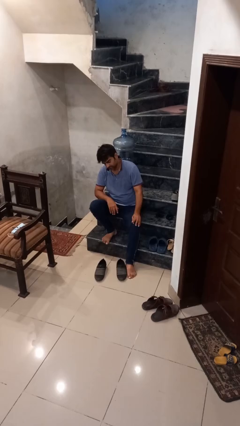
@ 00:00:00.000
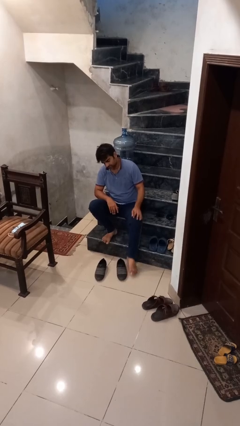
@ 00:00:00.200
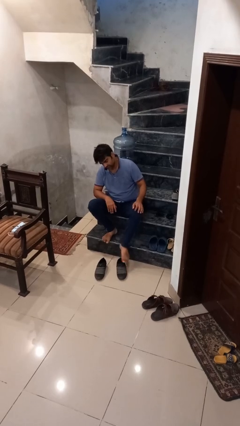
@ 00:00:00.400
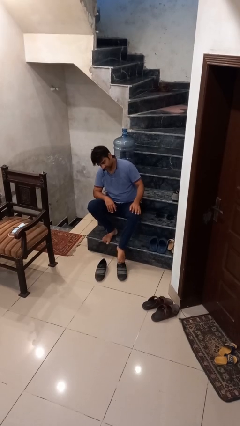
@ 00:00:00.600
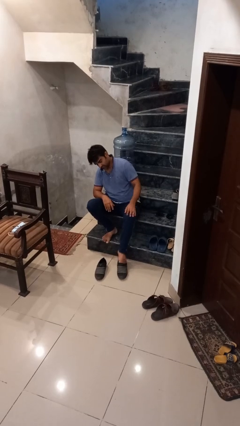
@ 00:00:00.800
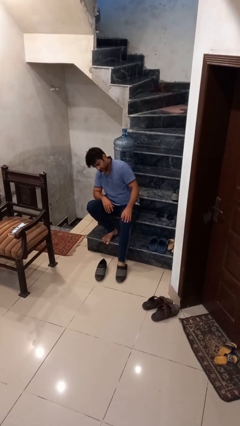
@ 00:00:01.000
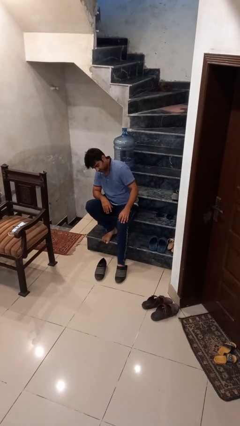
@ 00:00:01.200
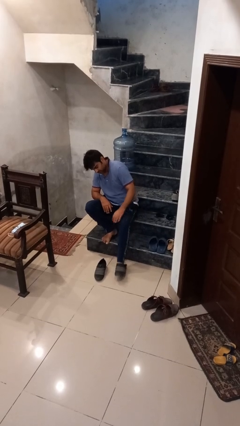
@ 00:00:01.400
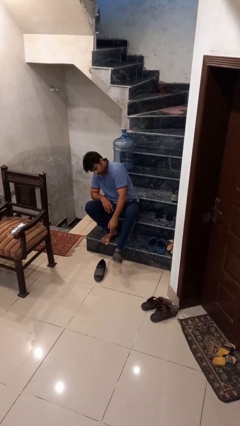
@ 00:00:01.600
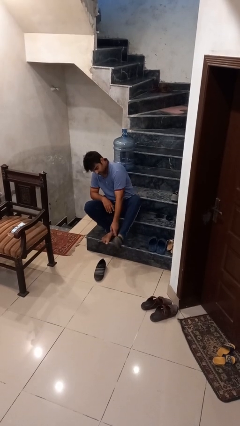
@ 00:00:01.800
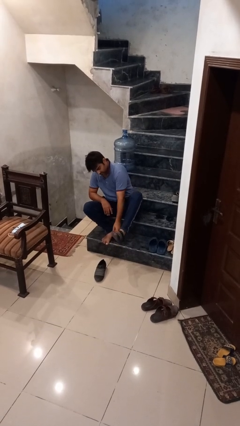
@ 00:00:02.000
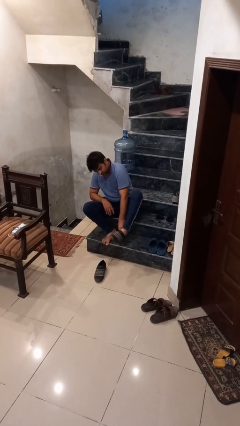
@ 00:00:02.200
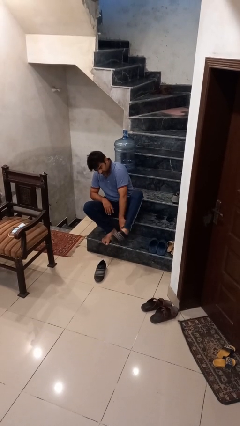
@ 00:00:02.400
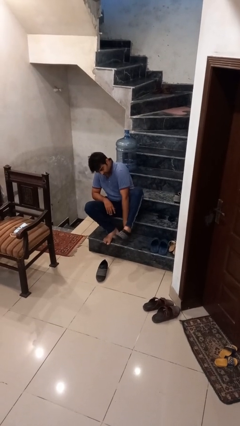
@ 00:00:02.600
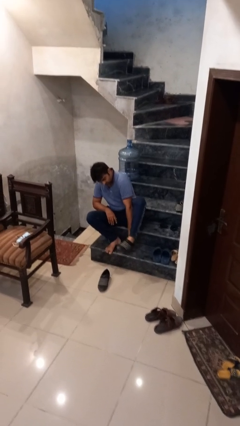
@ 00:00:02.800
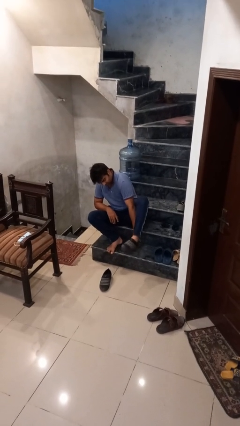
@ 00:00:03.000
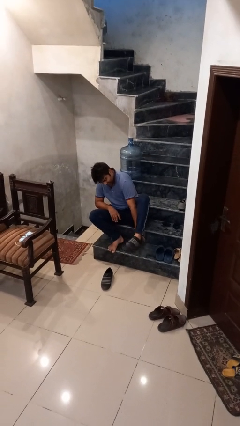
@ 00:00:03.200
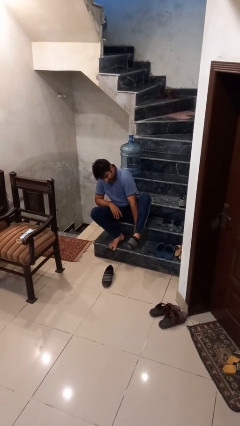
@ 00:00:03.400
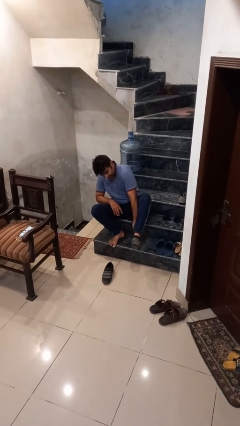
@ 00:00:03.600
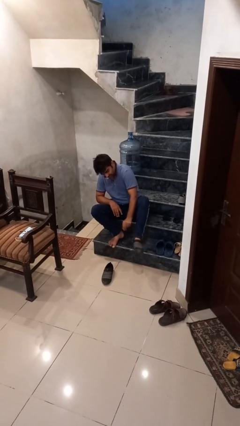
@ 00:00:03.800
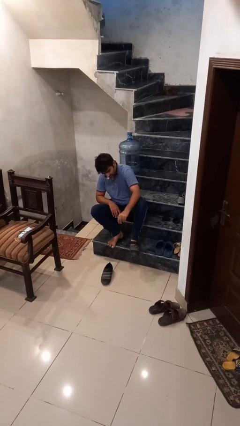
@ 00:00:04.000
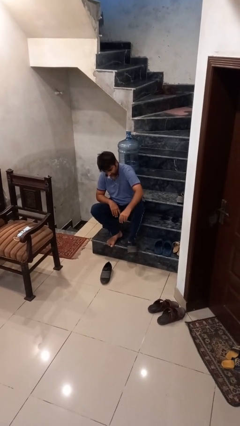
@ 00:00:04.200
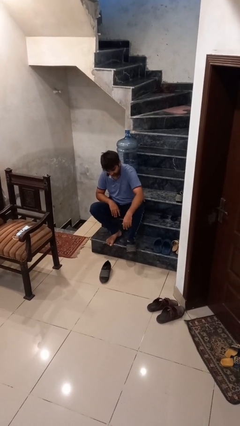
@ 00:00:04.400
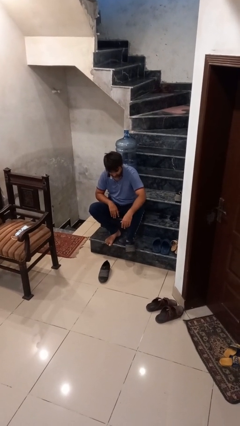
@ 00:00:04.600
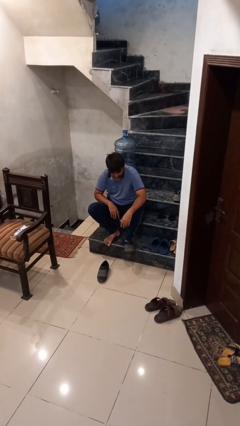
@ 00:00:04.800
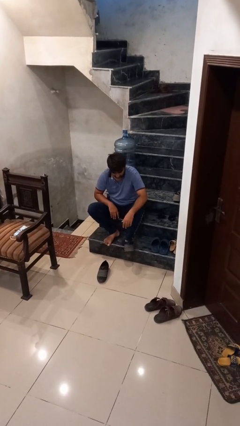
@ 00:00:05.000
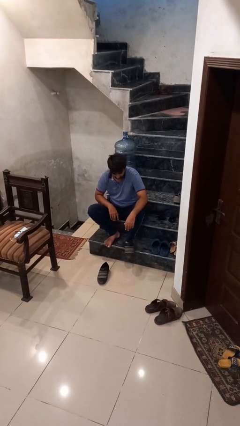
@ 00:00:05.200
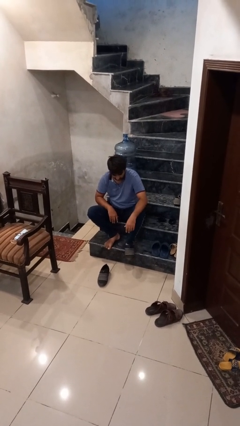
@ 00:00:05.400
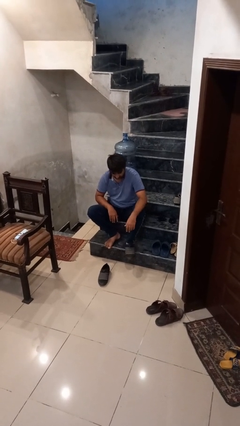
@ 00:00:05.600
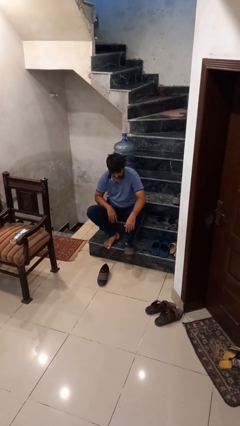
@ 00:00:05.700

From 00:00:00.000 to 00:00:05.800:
person puts on shoes

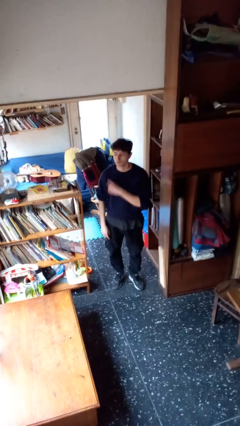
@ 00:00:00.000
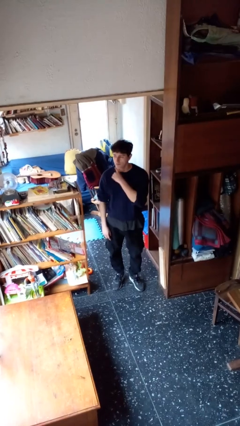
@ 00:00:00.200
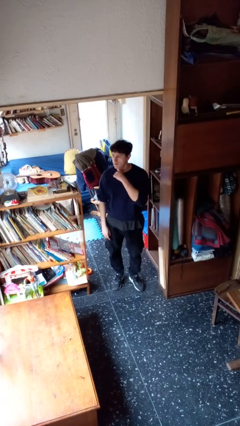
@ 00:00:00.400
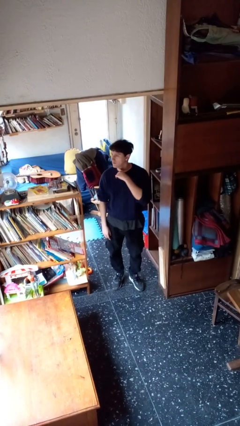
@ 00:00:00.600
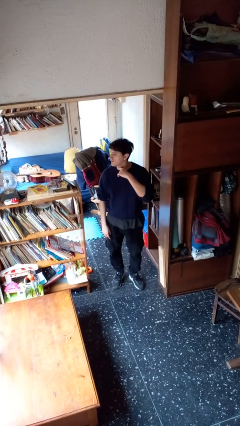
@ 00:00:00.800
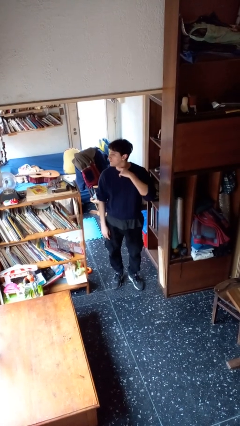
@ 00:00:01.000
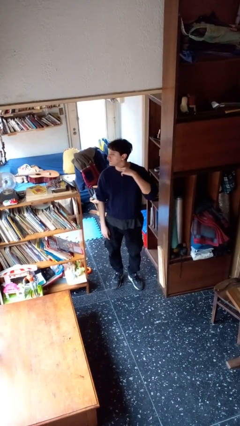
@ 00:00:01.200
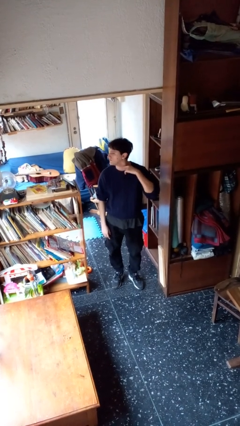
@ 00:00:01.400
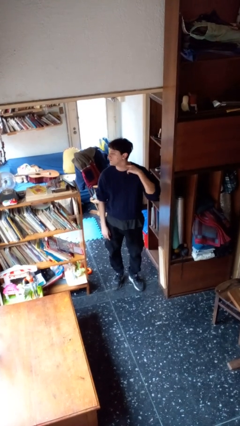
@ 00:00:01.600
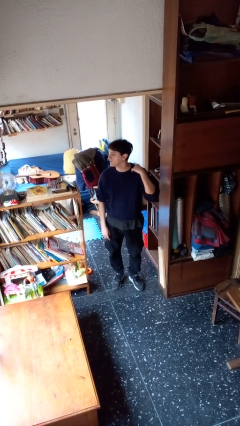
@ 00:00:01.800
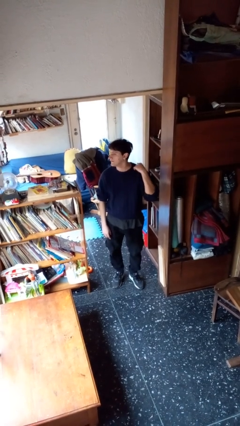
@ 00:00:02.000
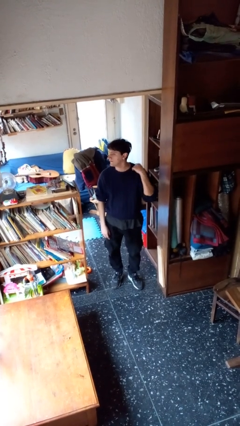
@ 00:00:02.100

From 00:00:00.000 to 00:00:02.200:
person gestures cut

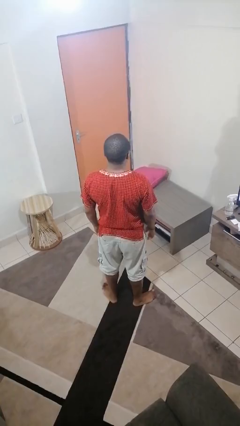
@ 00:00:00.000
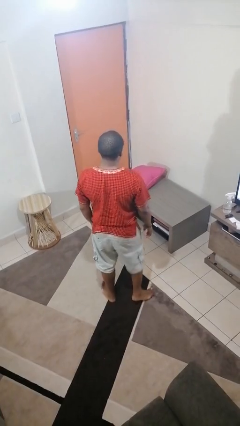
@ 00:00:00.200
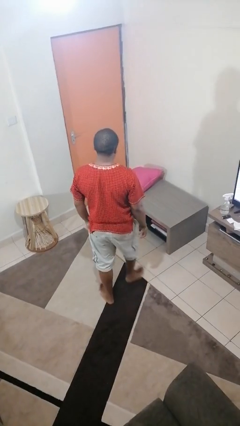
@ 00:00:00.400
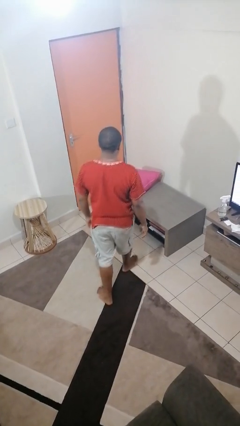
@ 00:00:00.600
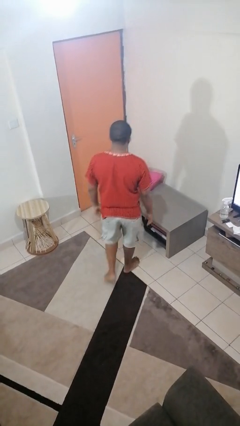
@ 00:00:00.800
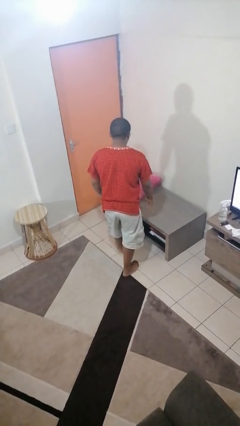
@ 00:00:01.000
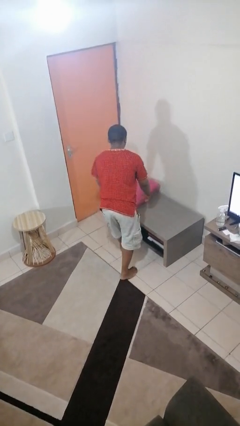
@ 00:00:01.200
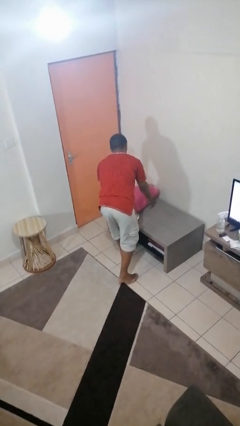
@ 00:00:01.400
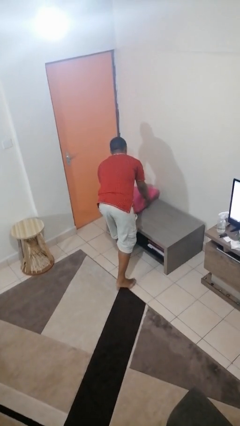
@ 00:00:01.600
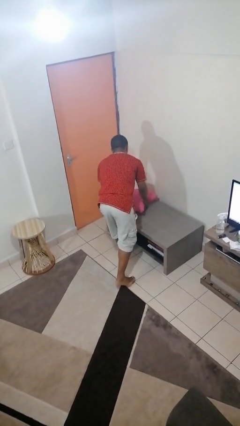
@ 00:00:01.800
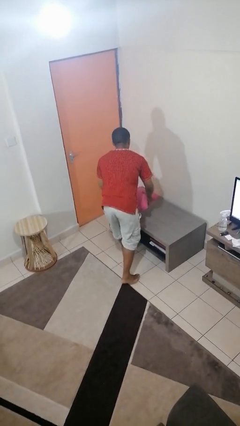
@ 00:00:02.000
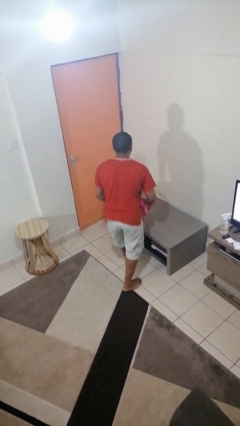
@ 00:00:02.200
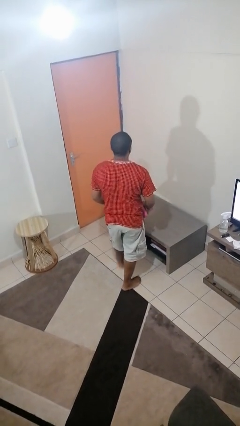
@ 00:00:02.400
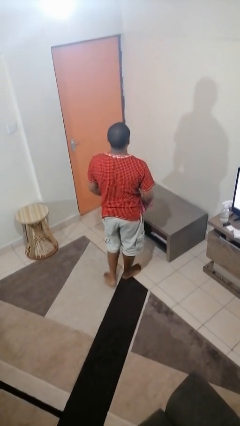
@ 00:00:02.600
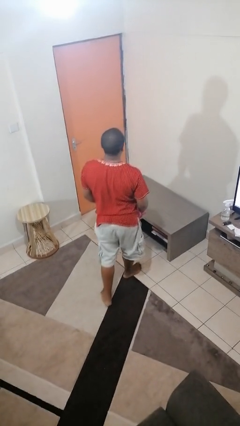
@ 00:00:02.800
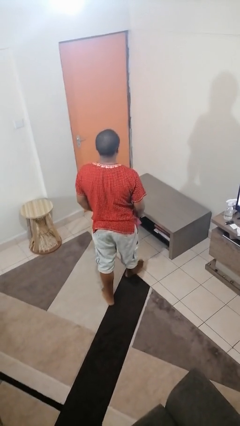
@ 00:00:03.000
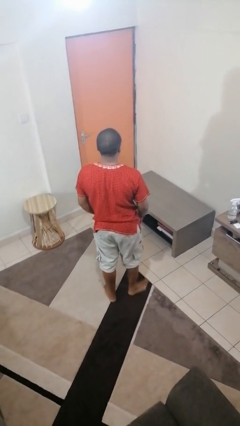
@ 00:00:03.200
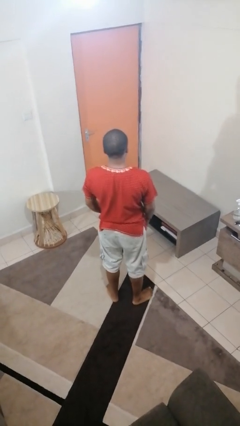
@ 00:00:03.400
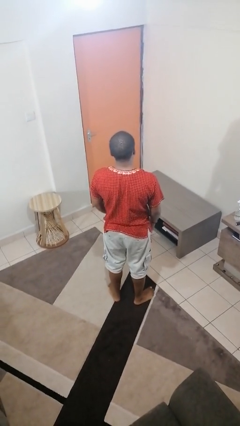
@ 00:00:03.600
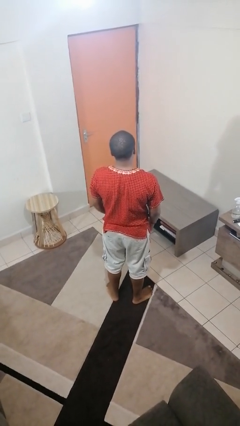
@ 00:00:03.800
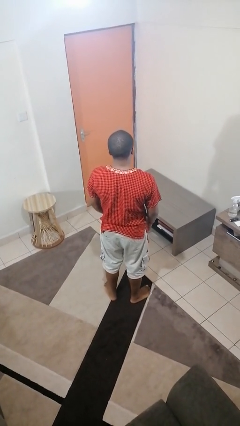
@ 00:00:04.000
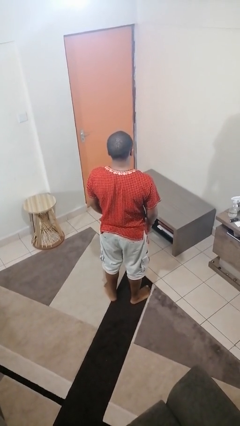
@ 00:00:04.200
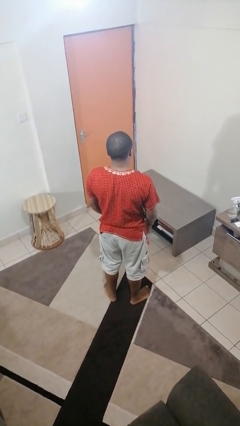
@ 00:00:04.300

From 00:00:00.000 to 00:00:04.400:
person picks up object from table

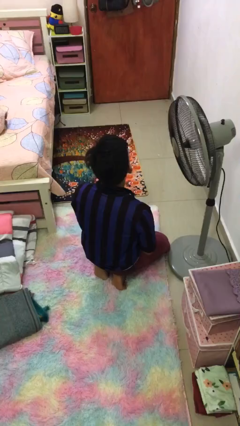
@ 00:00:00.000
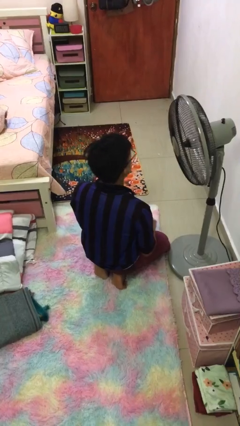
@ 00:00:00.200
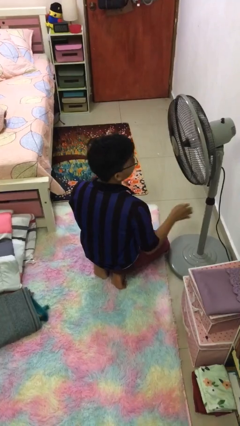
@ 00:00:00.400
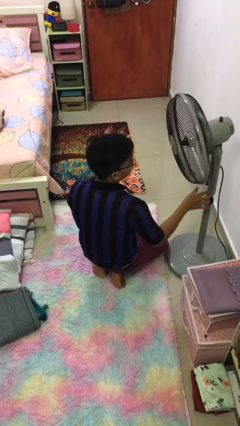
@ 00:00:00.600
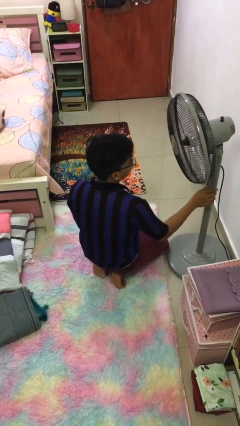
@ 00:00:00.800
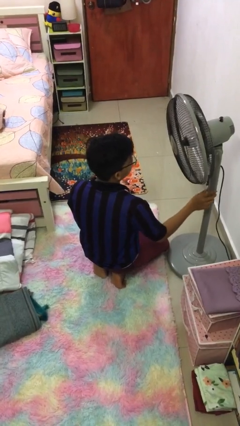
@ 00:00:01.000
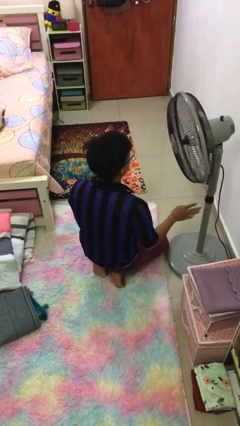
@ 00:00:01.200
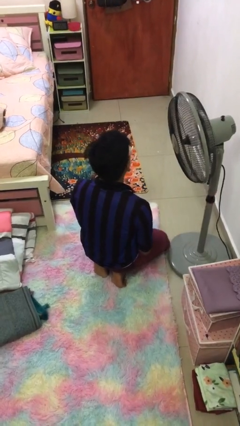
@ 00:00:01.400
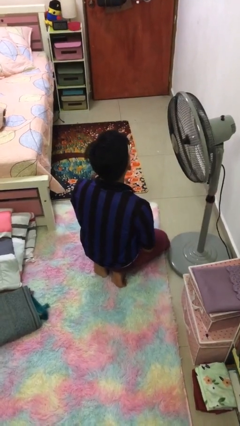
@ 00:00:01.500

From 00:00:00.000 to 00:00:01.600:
person turns off fan

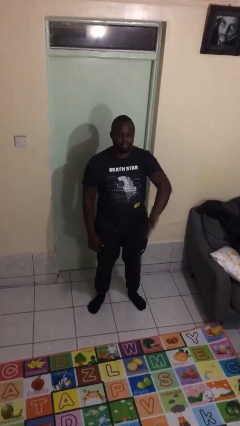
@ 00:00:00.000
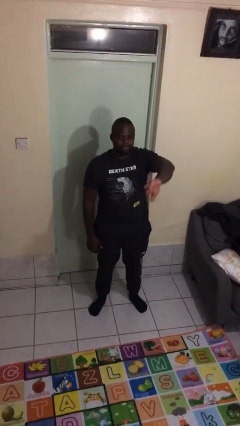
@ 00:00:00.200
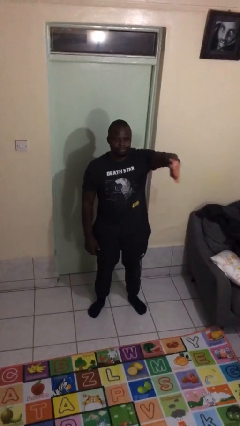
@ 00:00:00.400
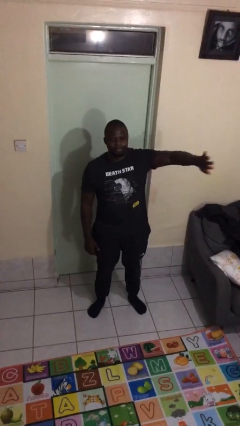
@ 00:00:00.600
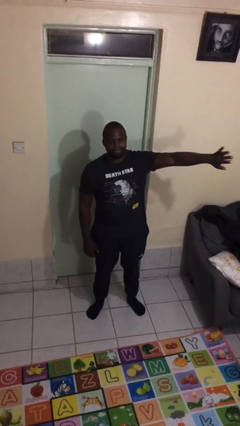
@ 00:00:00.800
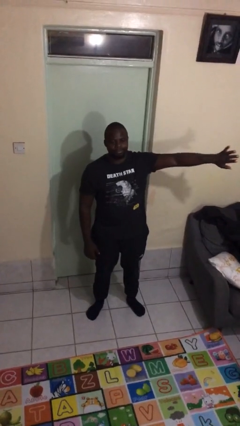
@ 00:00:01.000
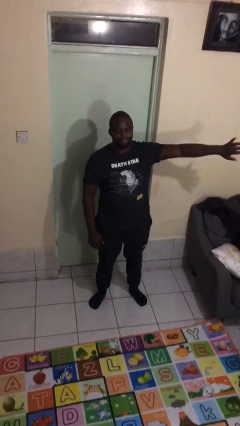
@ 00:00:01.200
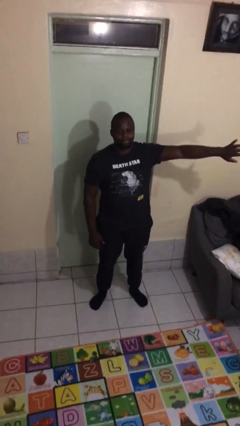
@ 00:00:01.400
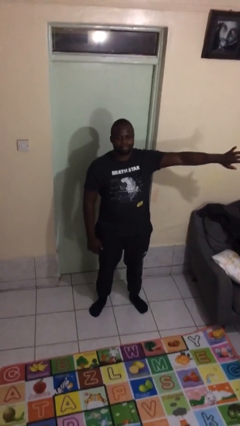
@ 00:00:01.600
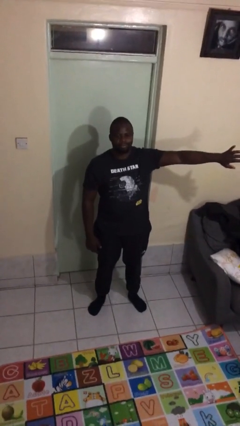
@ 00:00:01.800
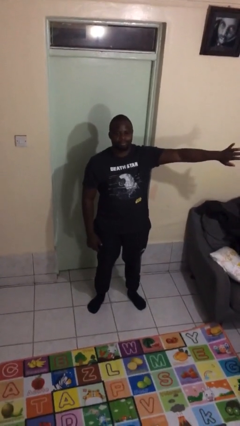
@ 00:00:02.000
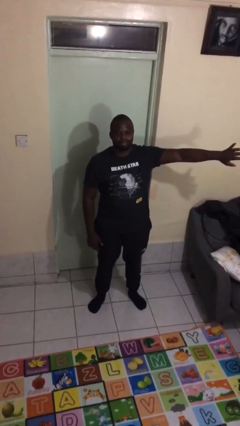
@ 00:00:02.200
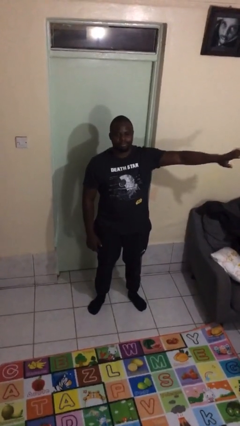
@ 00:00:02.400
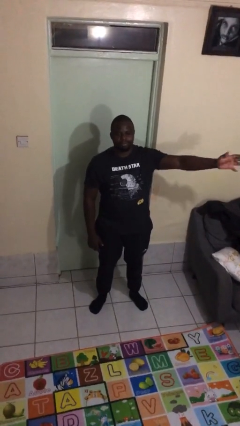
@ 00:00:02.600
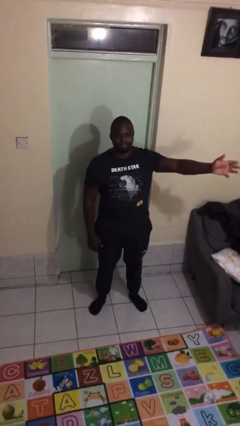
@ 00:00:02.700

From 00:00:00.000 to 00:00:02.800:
person gestures swipe left

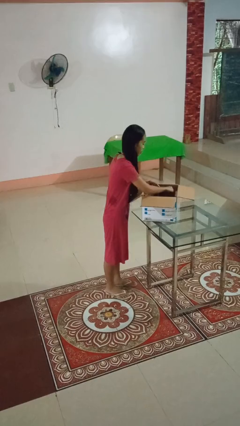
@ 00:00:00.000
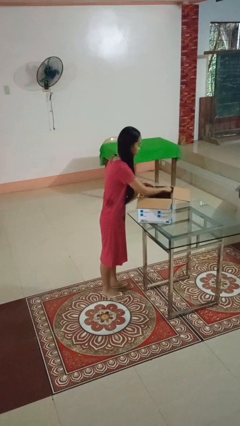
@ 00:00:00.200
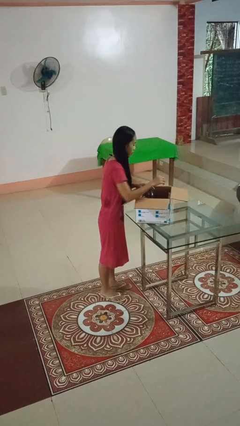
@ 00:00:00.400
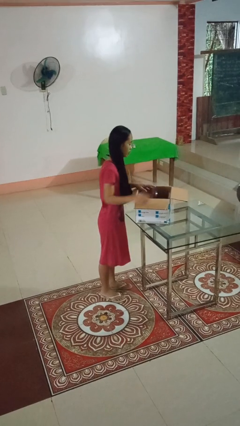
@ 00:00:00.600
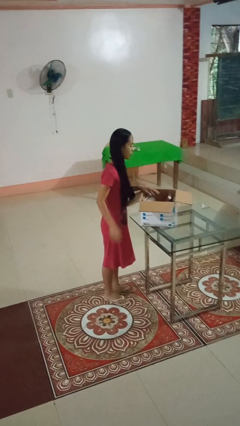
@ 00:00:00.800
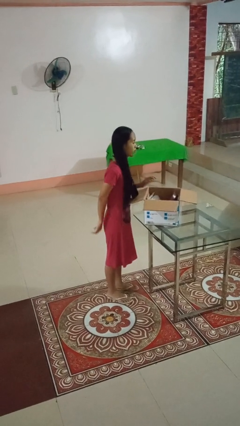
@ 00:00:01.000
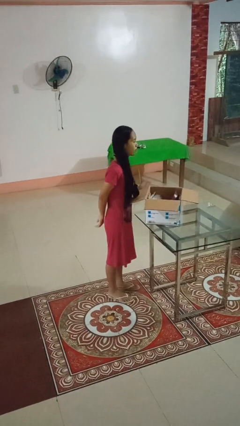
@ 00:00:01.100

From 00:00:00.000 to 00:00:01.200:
person puts object into box
